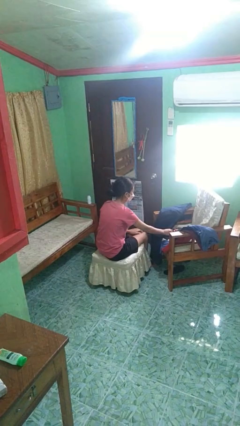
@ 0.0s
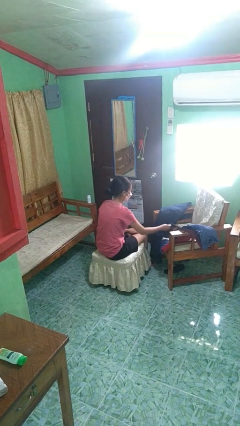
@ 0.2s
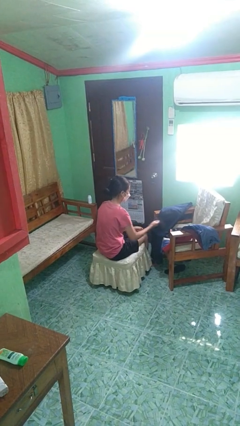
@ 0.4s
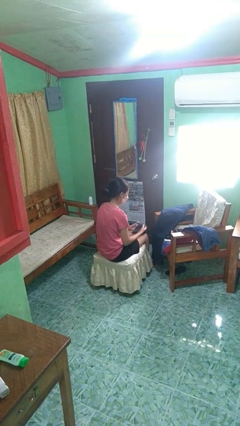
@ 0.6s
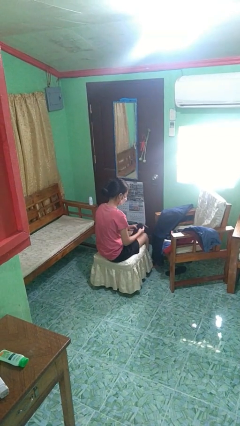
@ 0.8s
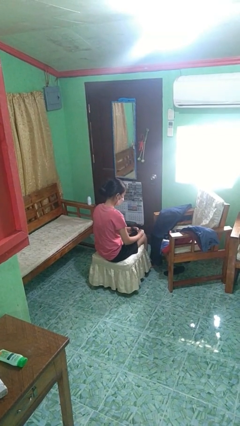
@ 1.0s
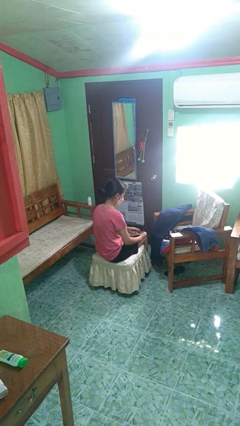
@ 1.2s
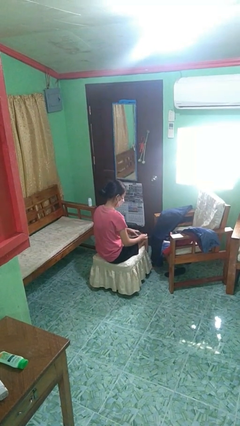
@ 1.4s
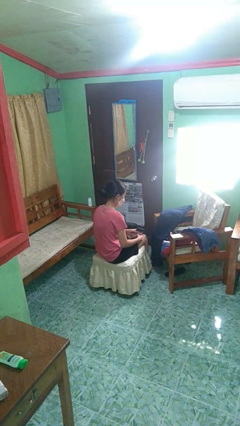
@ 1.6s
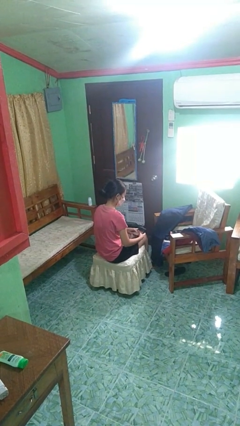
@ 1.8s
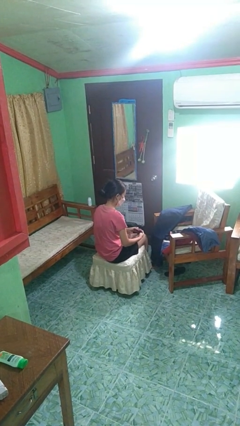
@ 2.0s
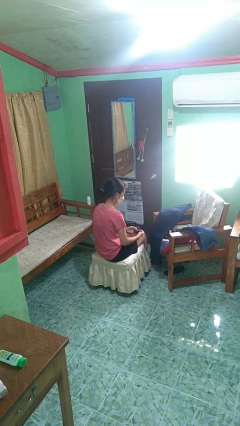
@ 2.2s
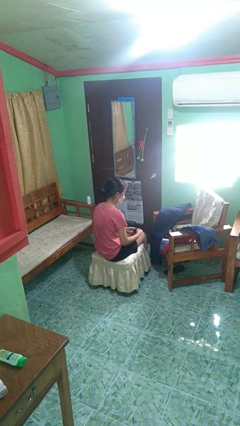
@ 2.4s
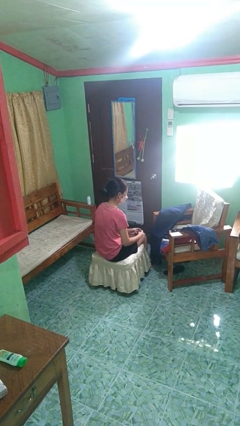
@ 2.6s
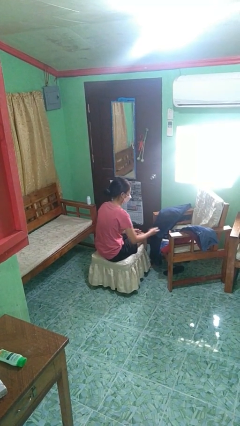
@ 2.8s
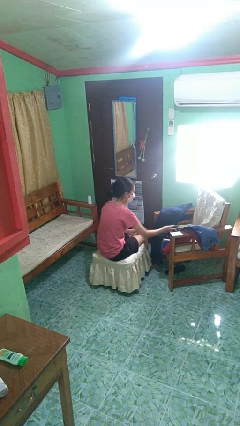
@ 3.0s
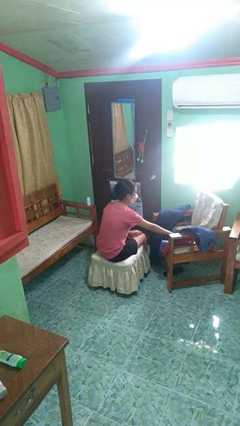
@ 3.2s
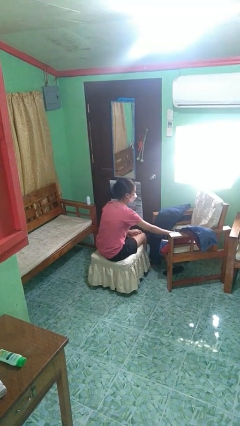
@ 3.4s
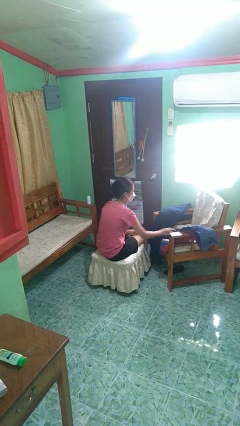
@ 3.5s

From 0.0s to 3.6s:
person folds socks

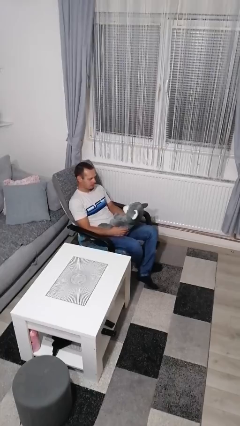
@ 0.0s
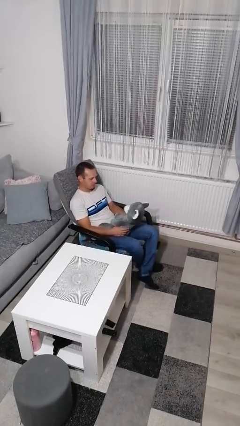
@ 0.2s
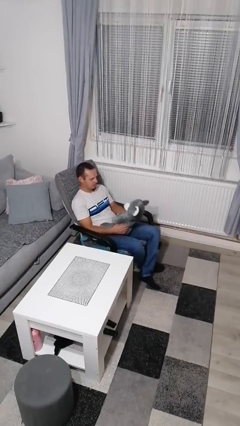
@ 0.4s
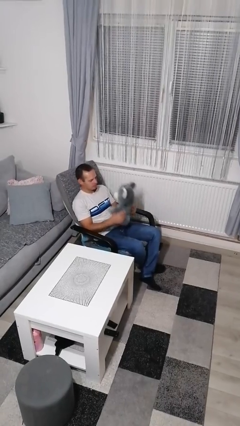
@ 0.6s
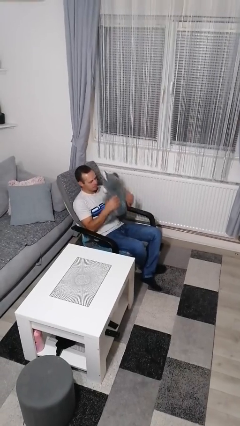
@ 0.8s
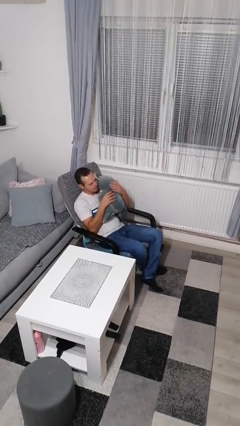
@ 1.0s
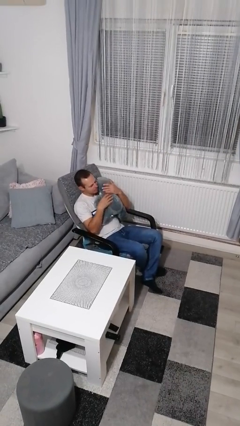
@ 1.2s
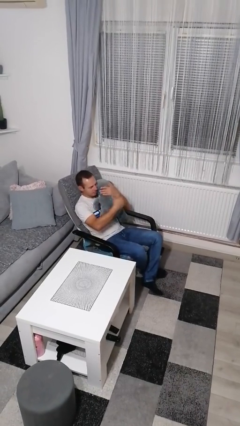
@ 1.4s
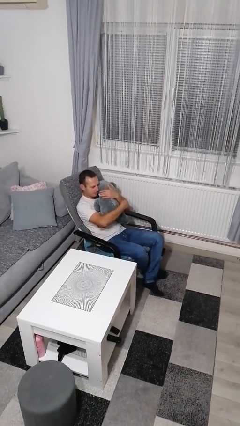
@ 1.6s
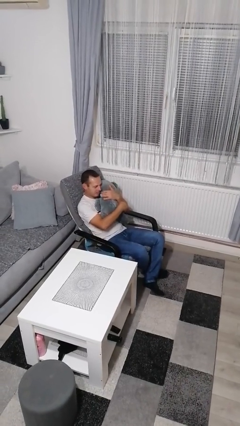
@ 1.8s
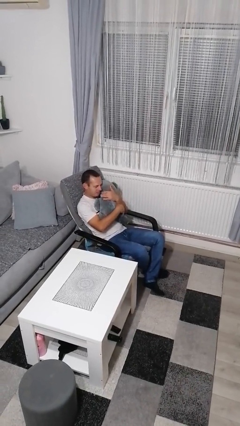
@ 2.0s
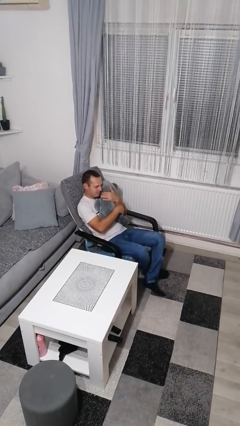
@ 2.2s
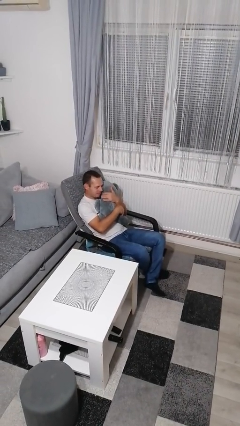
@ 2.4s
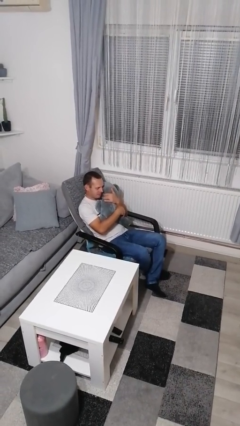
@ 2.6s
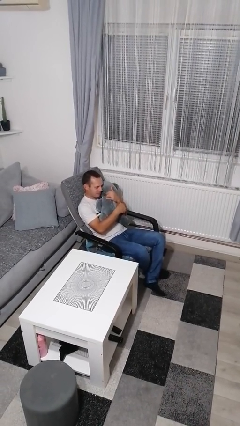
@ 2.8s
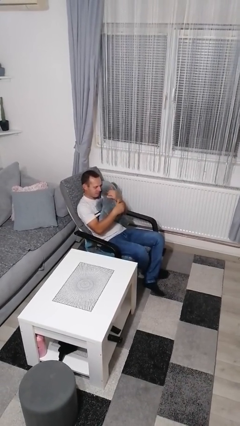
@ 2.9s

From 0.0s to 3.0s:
person hugs stuffed animal

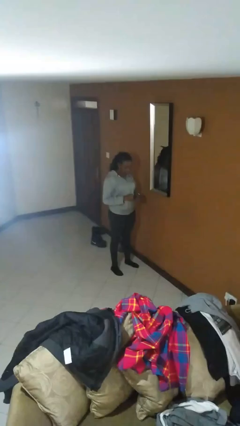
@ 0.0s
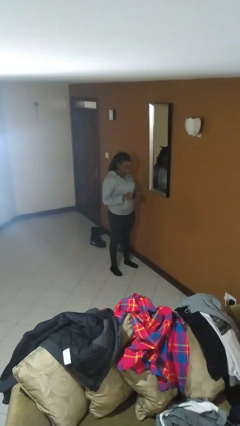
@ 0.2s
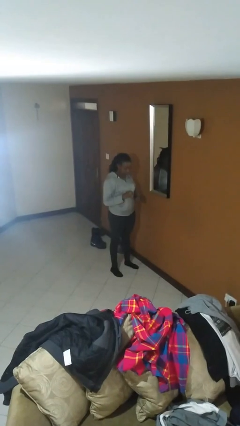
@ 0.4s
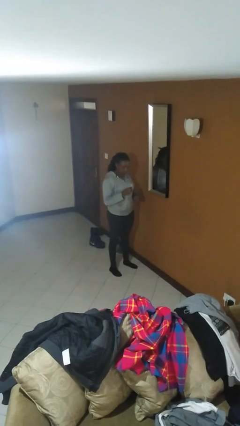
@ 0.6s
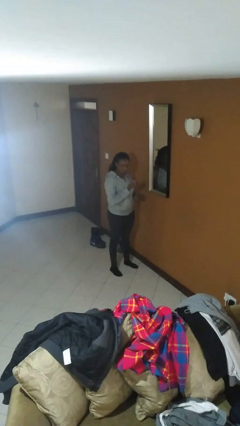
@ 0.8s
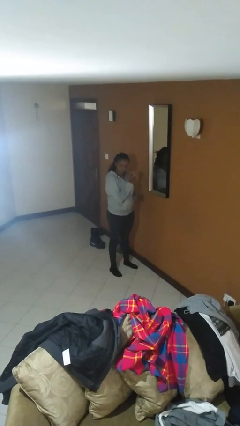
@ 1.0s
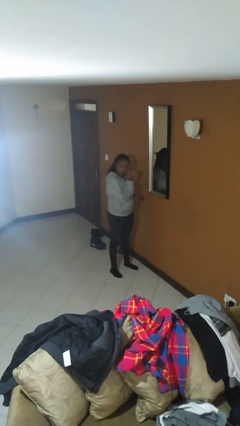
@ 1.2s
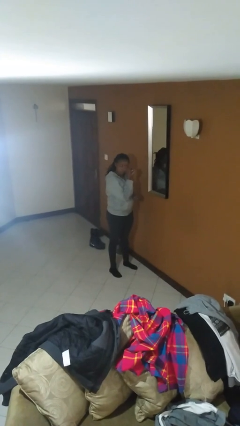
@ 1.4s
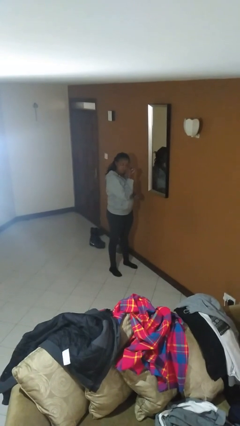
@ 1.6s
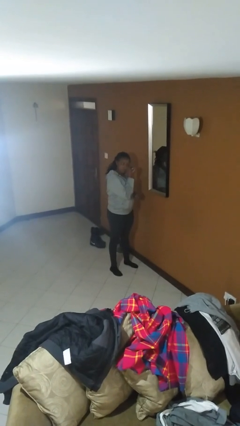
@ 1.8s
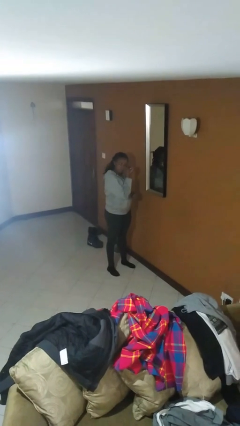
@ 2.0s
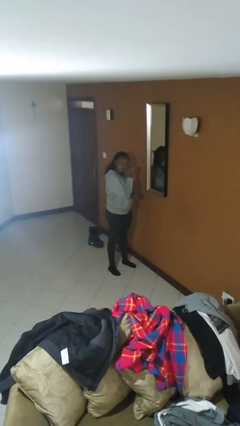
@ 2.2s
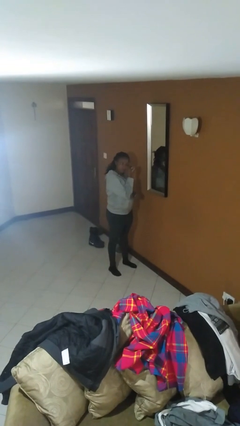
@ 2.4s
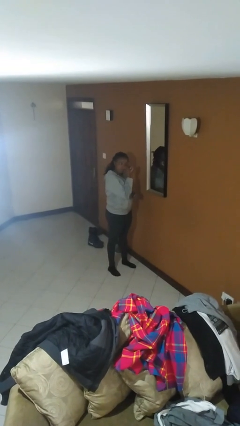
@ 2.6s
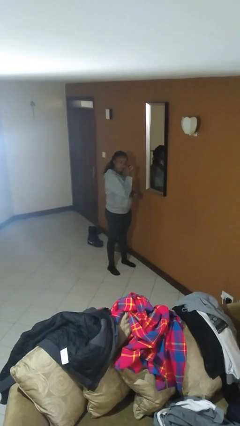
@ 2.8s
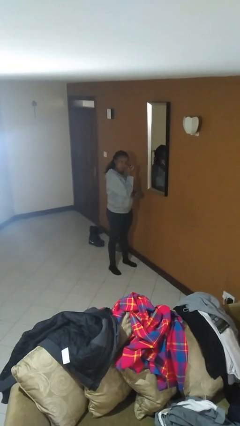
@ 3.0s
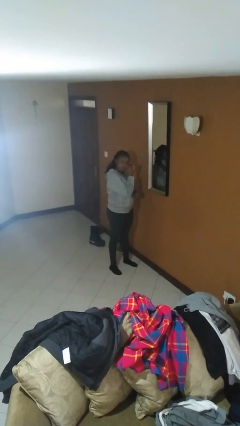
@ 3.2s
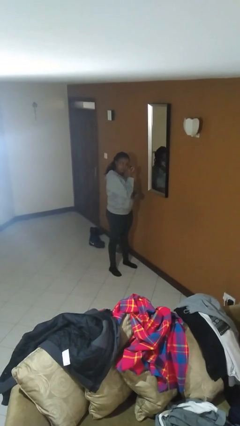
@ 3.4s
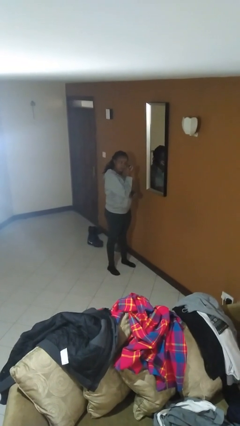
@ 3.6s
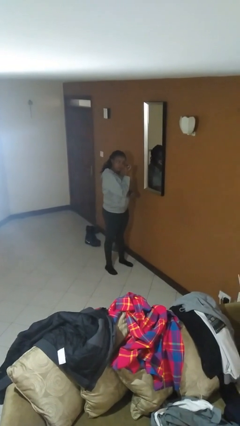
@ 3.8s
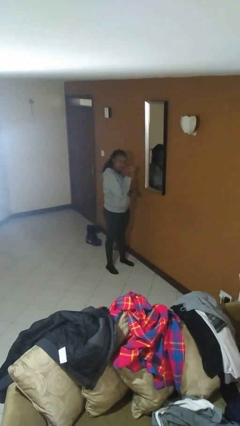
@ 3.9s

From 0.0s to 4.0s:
person applies eye makeup

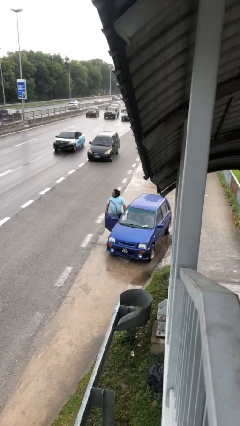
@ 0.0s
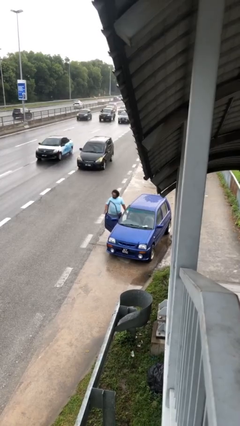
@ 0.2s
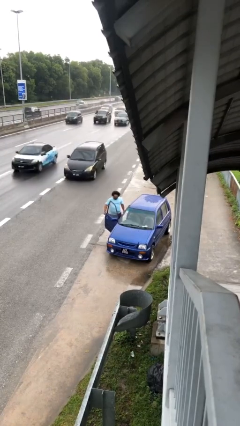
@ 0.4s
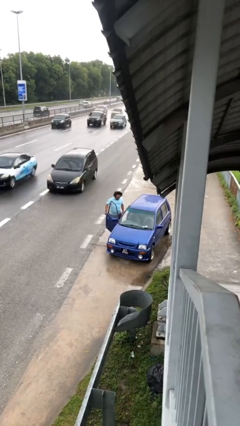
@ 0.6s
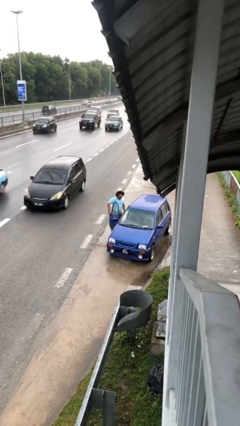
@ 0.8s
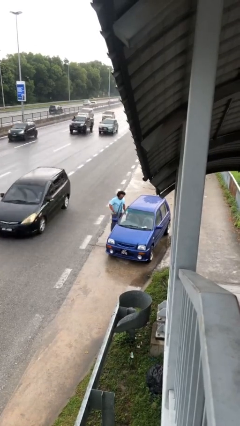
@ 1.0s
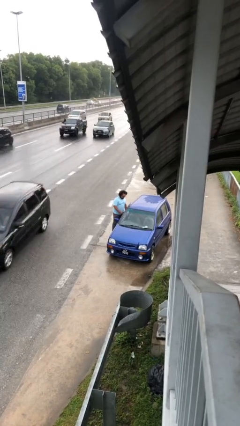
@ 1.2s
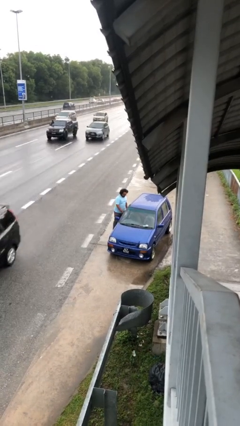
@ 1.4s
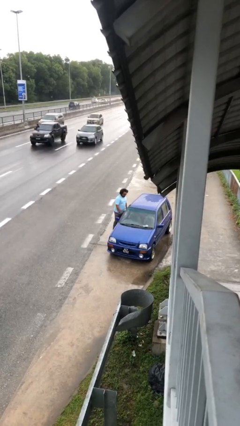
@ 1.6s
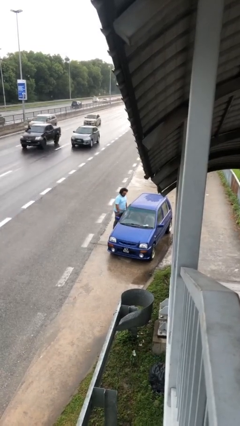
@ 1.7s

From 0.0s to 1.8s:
person closes car door

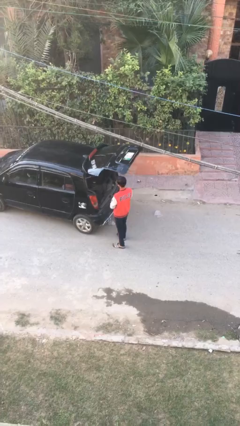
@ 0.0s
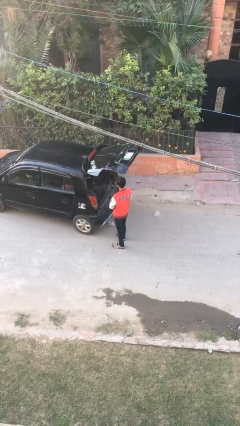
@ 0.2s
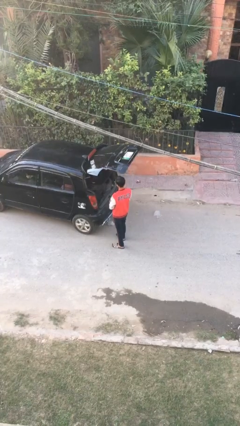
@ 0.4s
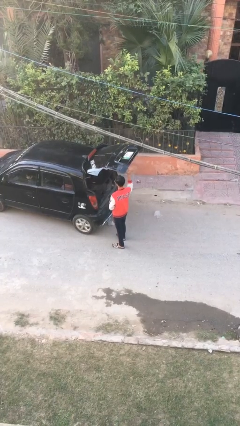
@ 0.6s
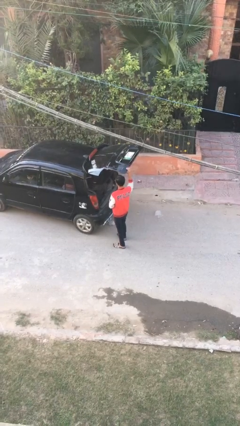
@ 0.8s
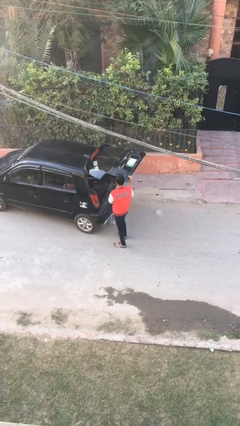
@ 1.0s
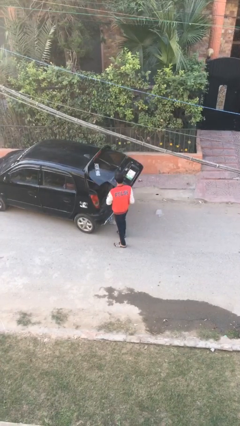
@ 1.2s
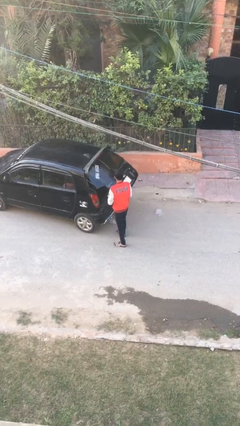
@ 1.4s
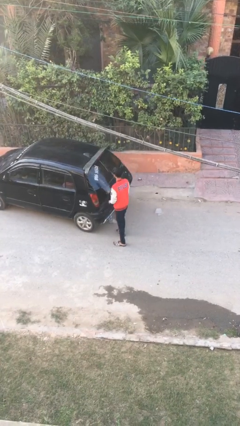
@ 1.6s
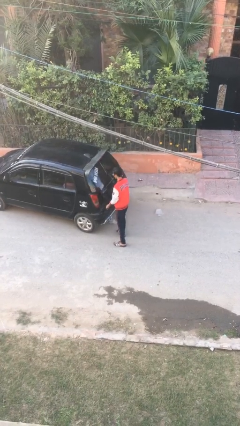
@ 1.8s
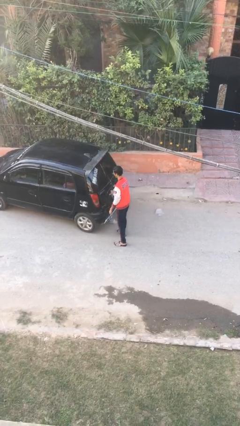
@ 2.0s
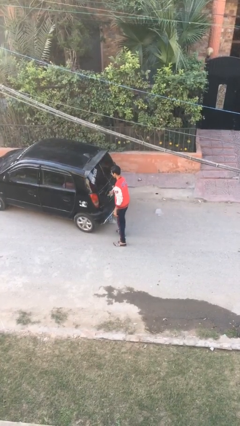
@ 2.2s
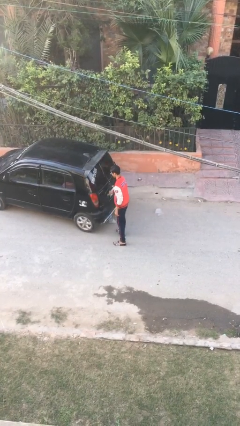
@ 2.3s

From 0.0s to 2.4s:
person closes car trunk

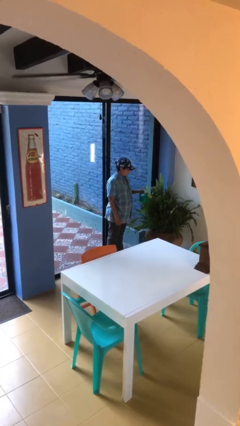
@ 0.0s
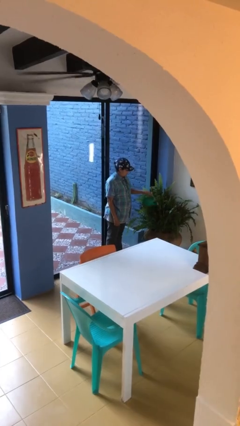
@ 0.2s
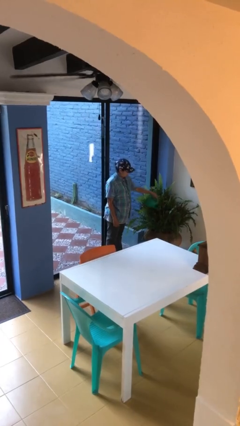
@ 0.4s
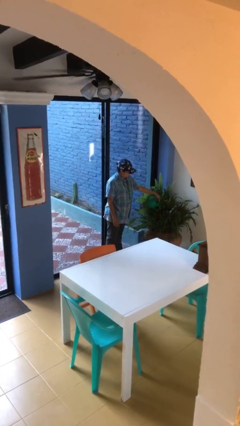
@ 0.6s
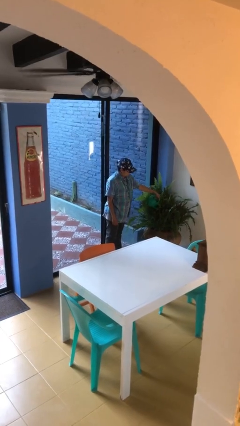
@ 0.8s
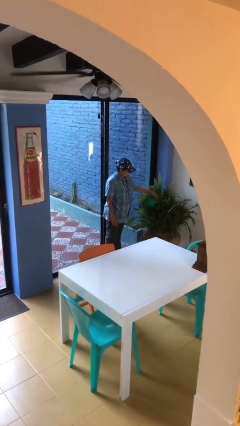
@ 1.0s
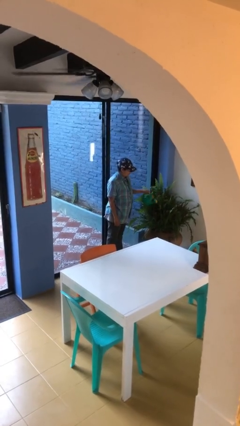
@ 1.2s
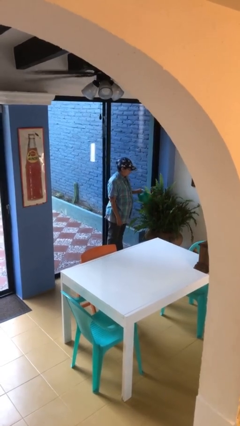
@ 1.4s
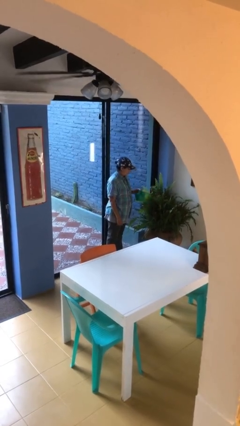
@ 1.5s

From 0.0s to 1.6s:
person waters houseplant

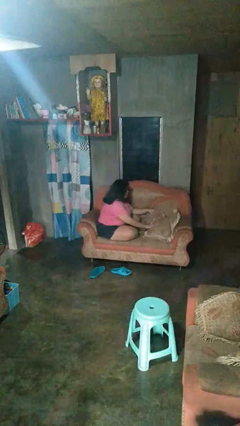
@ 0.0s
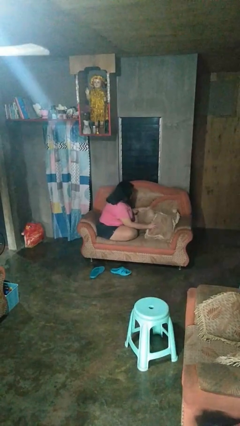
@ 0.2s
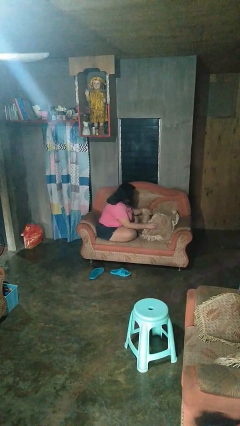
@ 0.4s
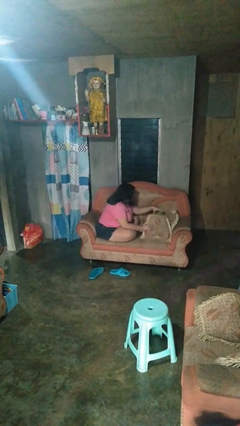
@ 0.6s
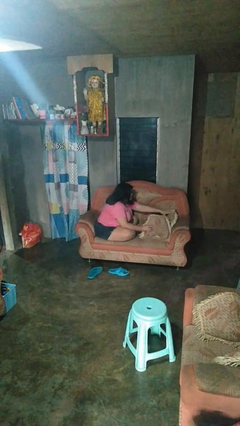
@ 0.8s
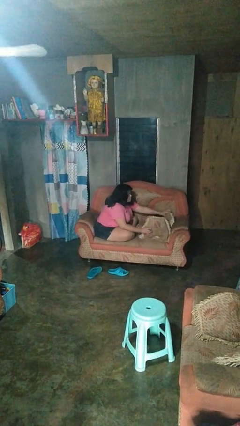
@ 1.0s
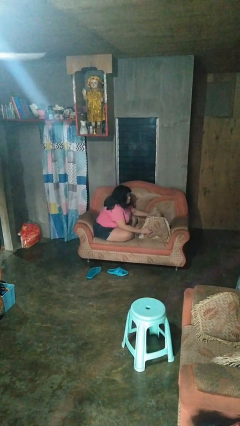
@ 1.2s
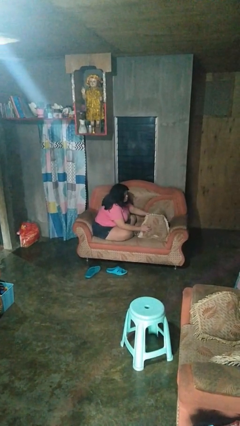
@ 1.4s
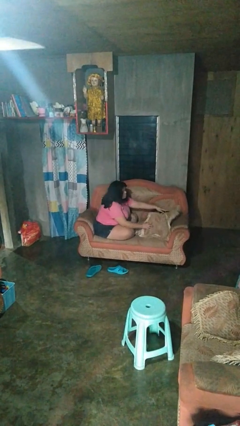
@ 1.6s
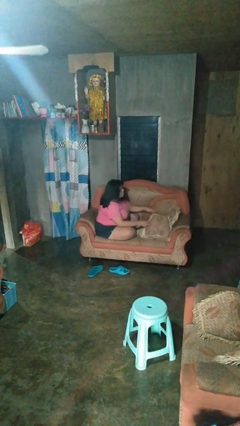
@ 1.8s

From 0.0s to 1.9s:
person searches in couch
